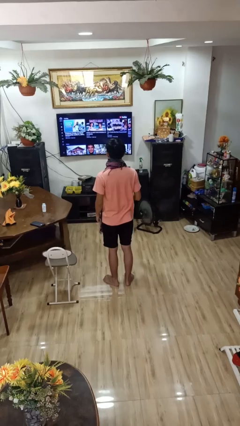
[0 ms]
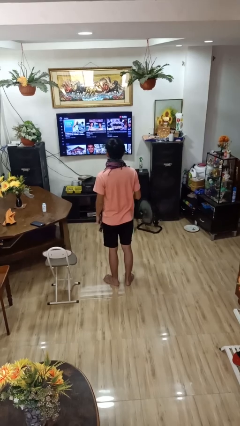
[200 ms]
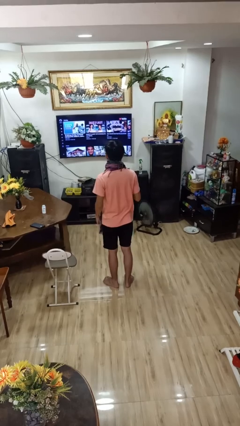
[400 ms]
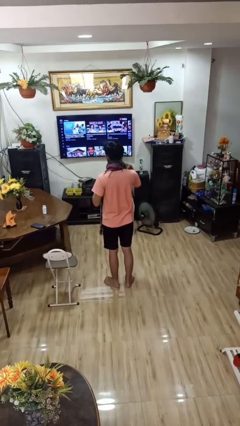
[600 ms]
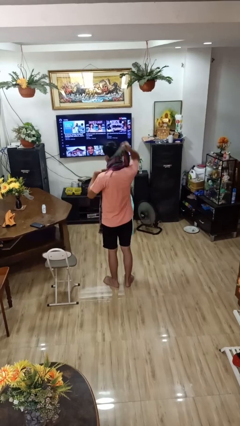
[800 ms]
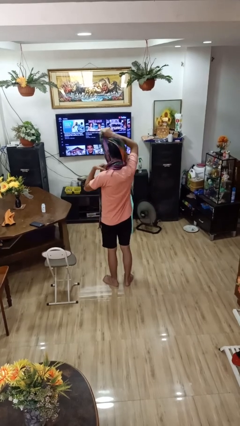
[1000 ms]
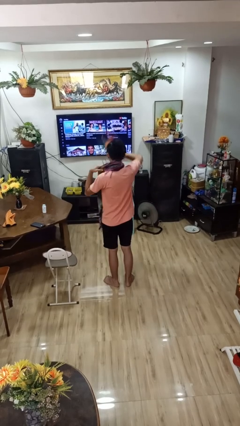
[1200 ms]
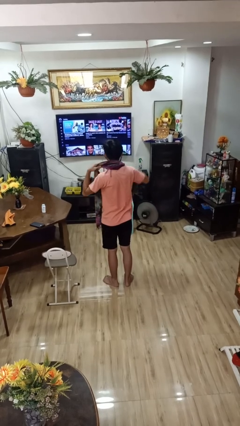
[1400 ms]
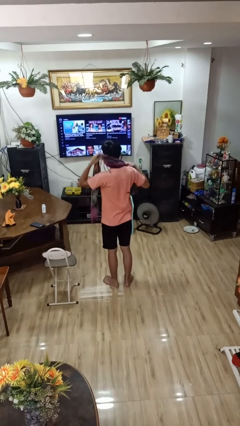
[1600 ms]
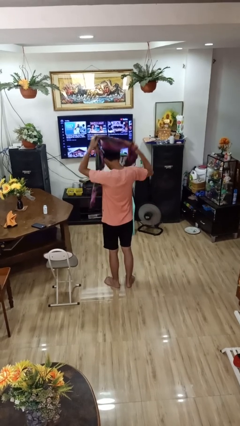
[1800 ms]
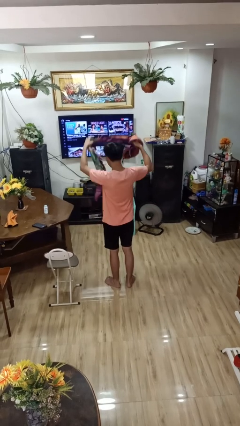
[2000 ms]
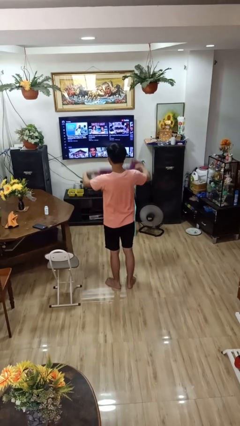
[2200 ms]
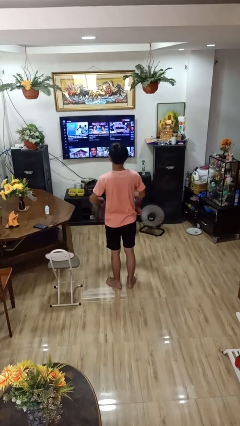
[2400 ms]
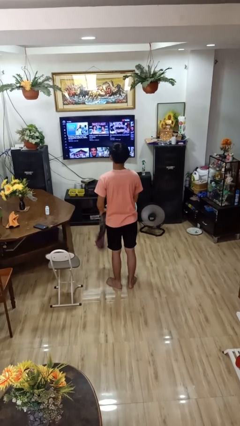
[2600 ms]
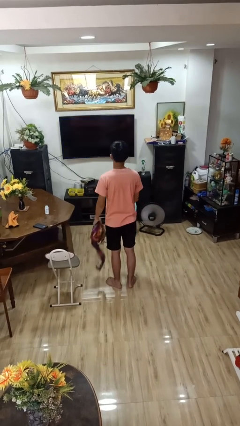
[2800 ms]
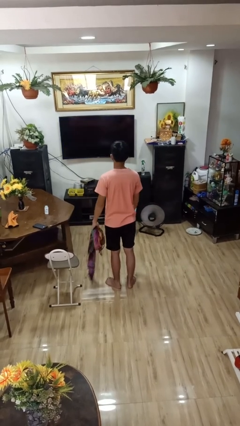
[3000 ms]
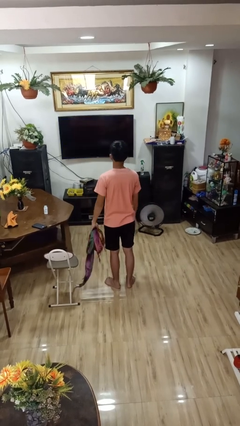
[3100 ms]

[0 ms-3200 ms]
person takes off scarf

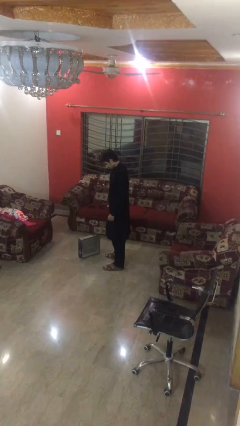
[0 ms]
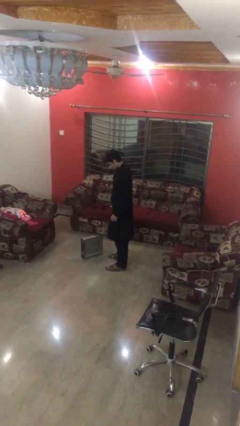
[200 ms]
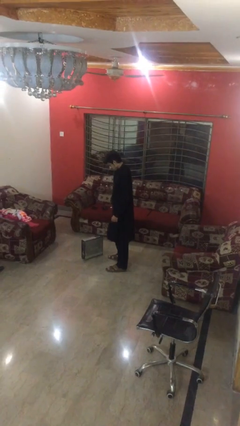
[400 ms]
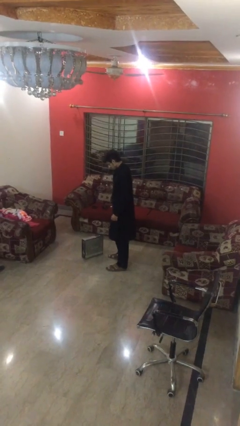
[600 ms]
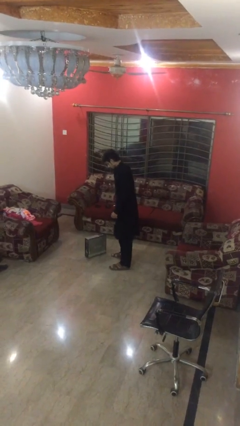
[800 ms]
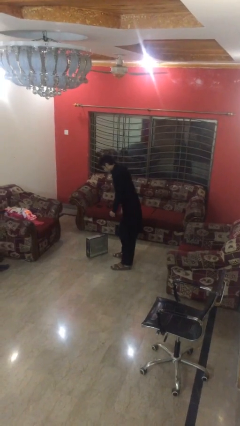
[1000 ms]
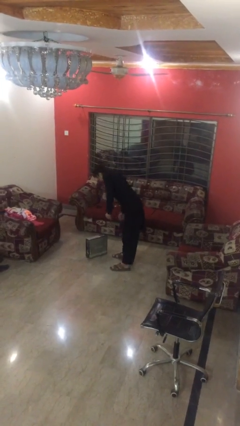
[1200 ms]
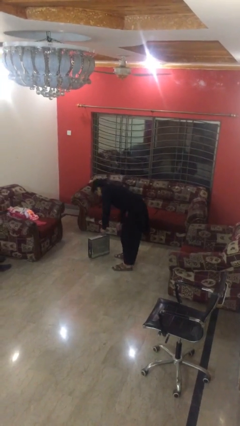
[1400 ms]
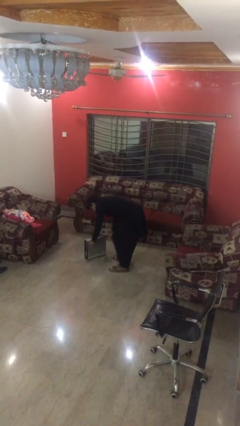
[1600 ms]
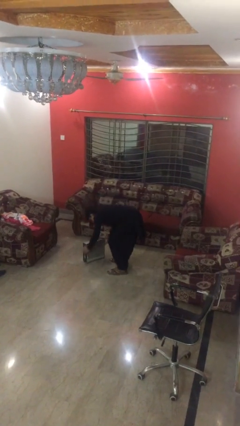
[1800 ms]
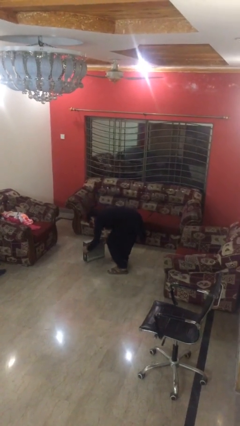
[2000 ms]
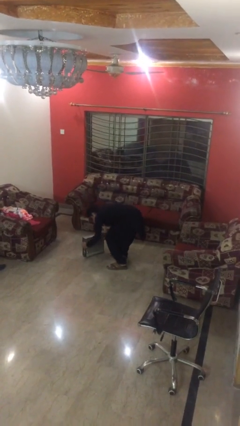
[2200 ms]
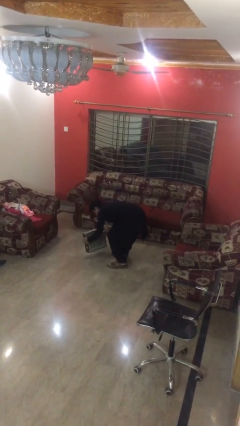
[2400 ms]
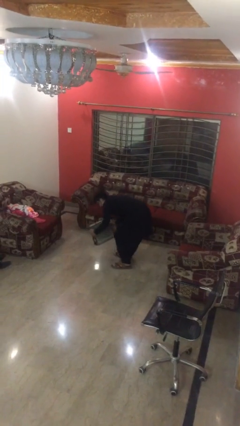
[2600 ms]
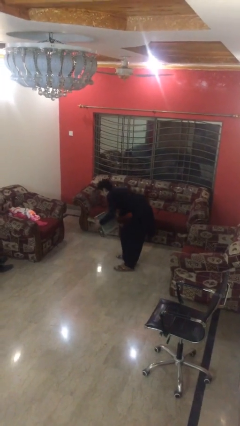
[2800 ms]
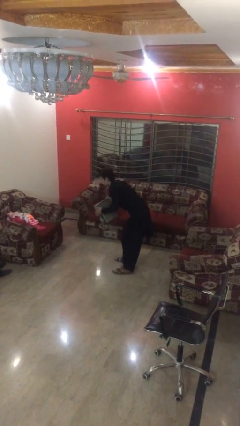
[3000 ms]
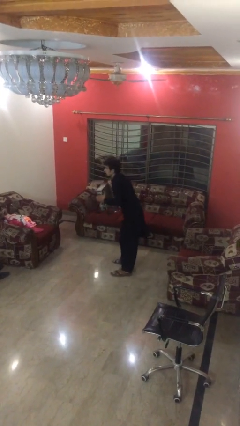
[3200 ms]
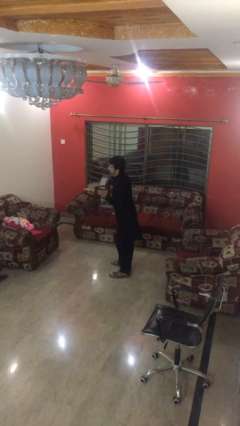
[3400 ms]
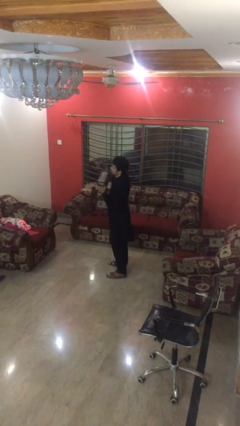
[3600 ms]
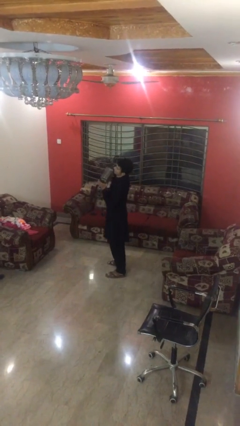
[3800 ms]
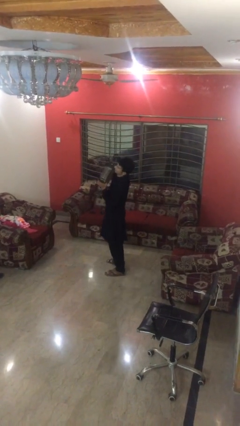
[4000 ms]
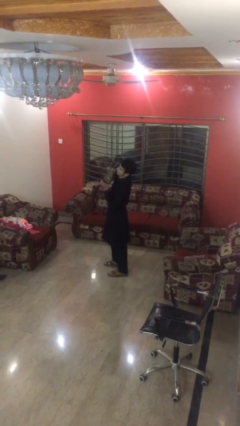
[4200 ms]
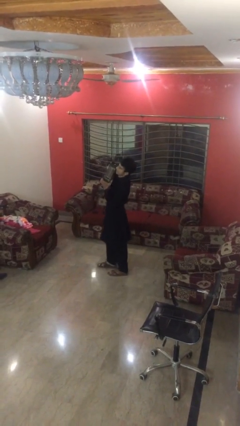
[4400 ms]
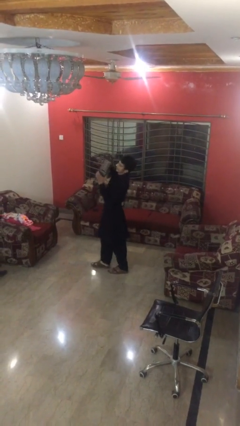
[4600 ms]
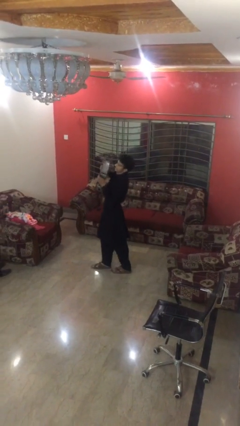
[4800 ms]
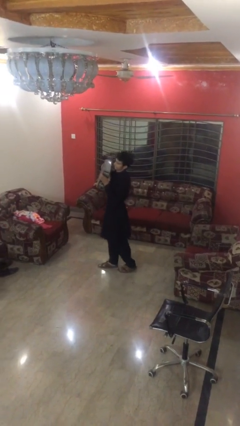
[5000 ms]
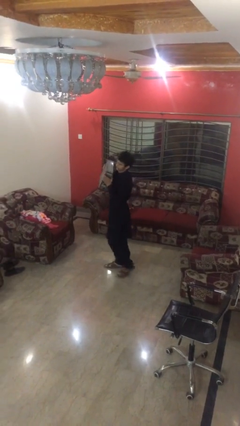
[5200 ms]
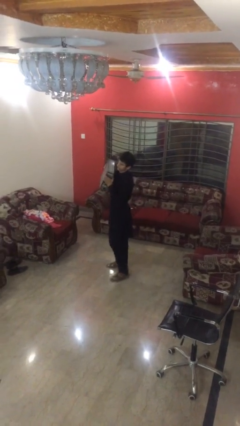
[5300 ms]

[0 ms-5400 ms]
person picks up object from floor

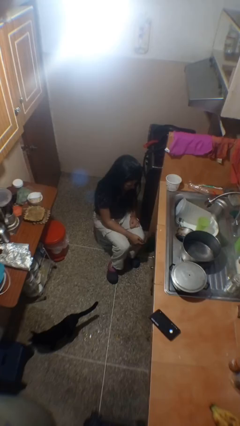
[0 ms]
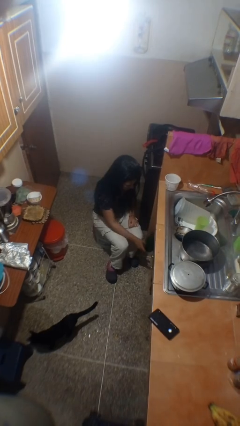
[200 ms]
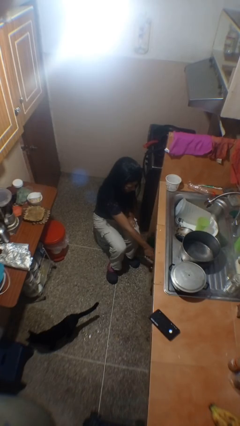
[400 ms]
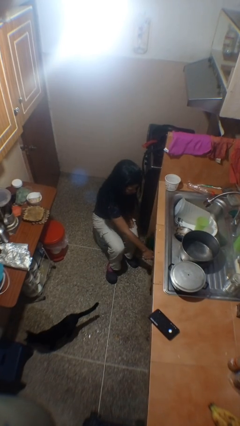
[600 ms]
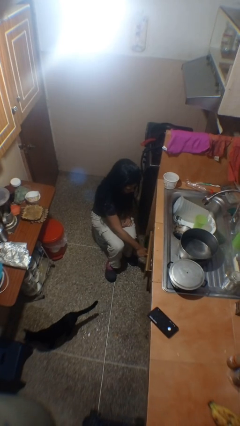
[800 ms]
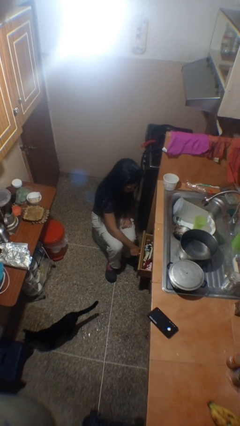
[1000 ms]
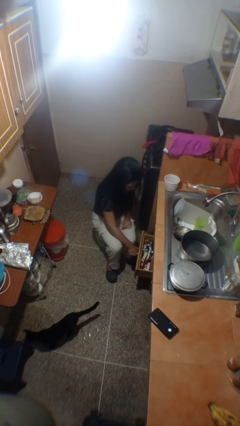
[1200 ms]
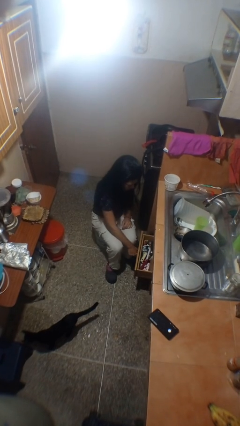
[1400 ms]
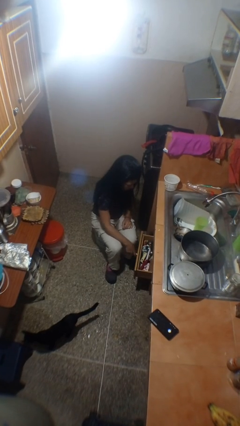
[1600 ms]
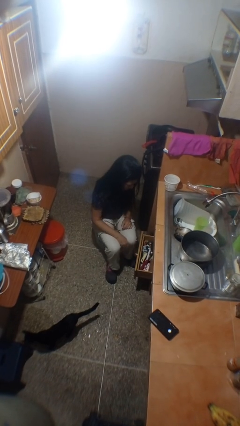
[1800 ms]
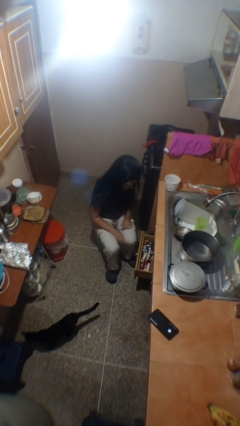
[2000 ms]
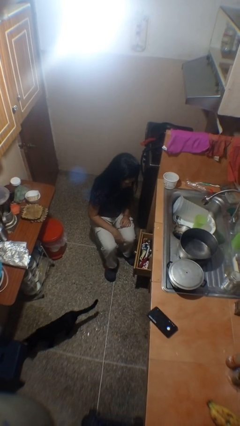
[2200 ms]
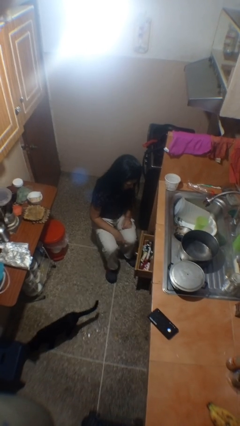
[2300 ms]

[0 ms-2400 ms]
person opens kitchen drawer

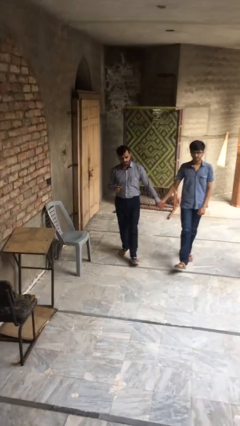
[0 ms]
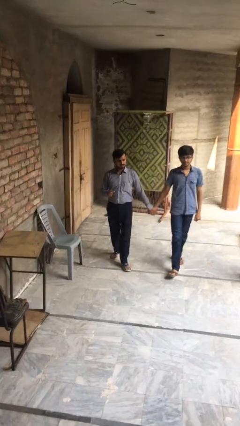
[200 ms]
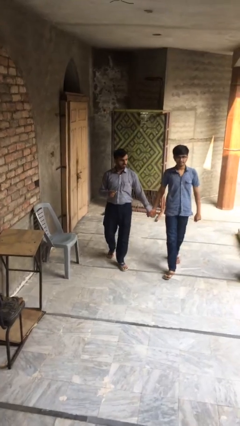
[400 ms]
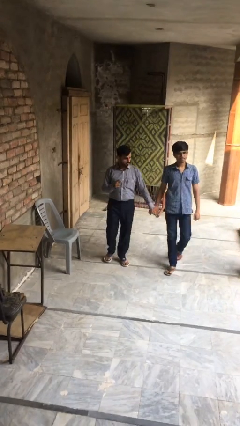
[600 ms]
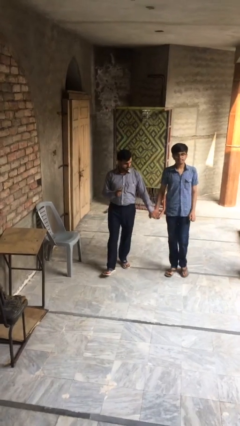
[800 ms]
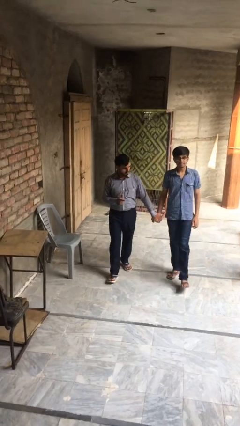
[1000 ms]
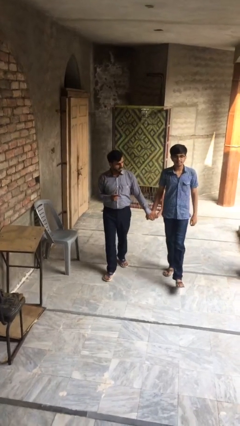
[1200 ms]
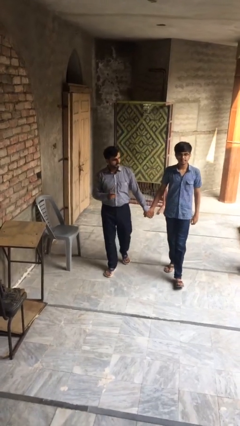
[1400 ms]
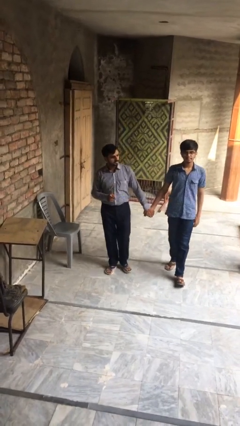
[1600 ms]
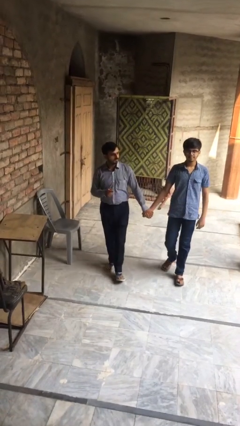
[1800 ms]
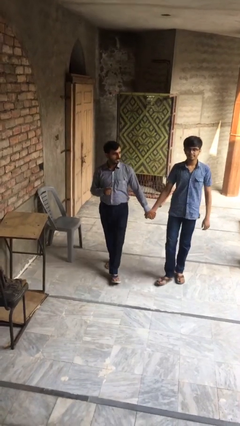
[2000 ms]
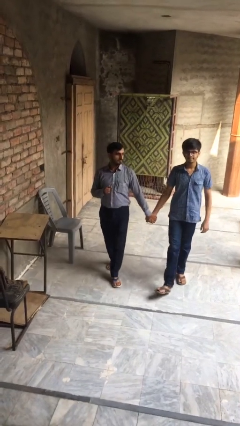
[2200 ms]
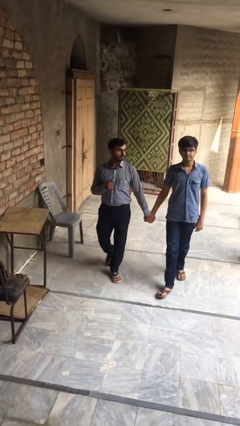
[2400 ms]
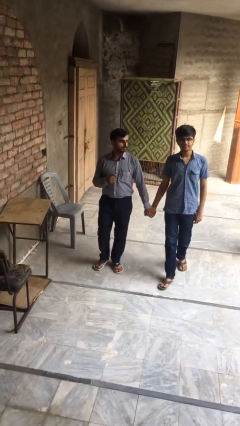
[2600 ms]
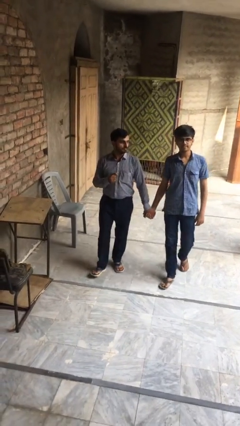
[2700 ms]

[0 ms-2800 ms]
person holds hand

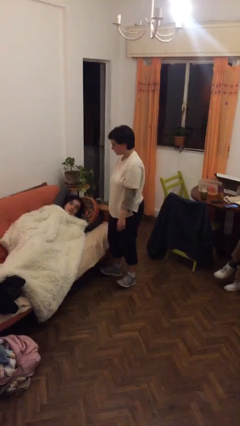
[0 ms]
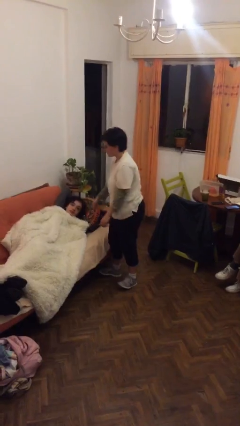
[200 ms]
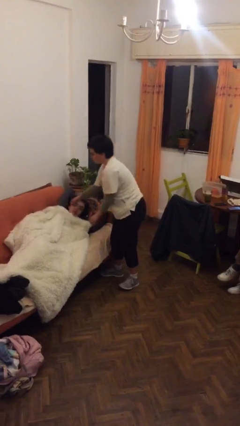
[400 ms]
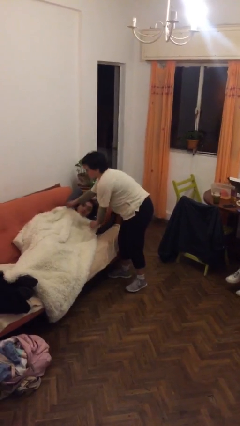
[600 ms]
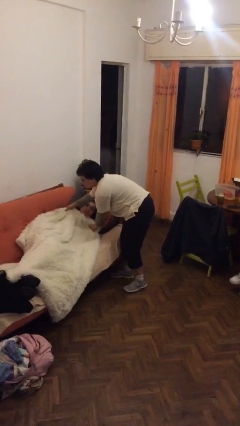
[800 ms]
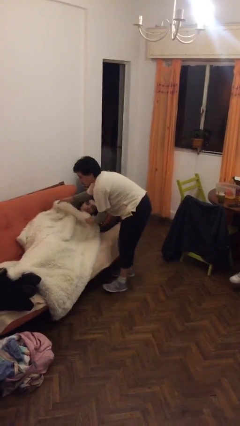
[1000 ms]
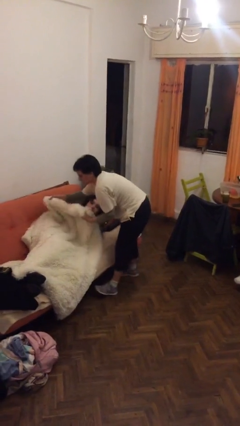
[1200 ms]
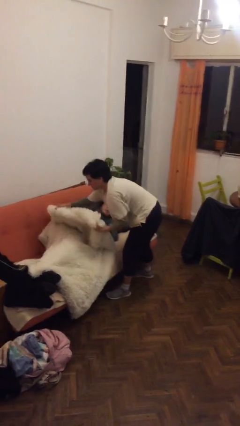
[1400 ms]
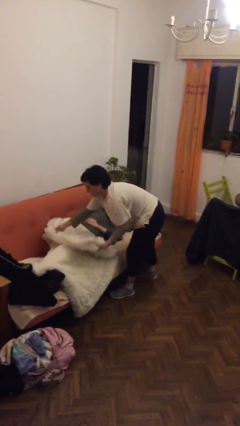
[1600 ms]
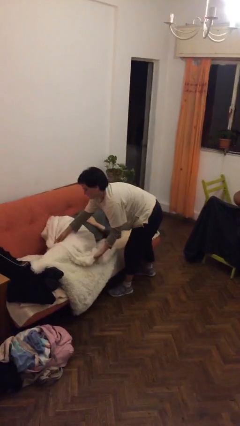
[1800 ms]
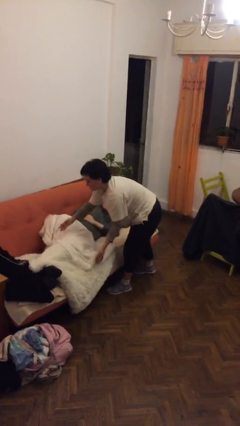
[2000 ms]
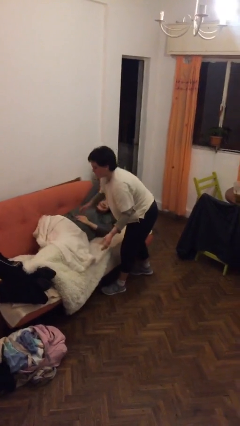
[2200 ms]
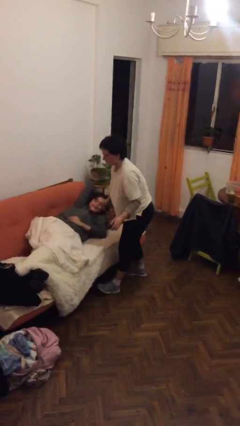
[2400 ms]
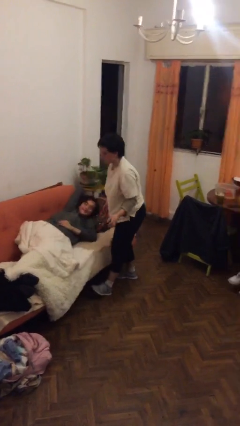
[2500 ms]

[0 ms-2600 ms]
person uncovers friend with blanket

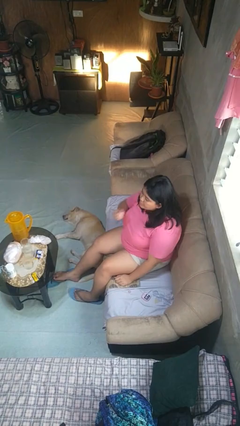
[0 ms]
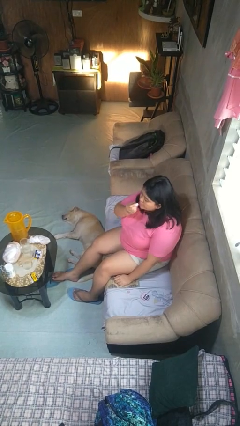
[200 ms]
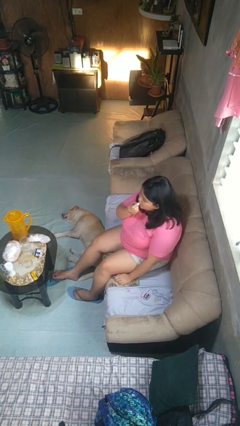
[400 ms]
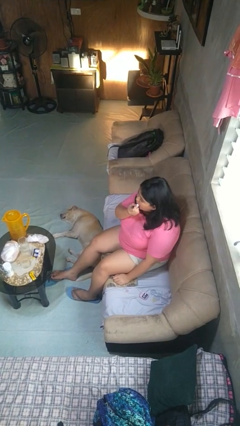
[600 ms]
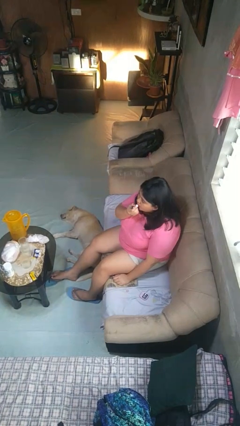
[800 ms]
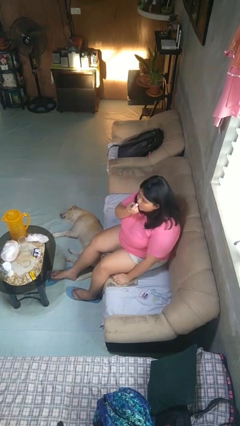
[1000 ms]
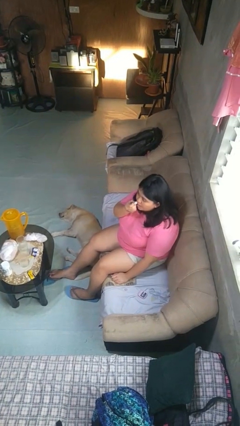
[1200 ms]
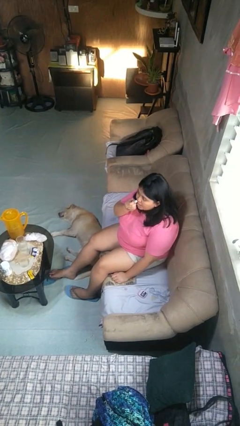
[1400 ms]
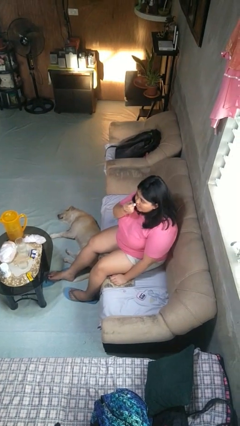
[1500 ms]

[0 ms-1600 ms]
person applies lip makeup
